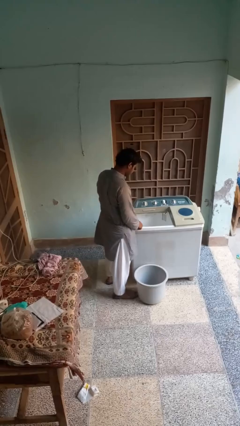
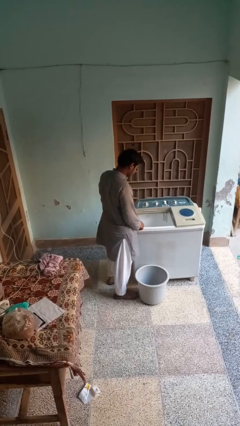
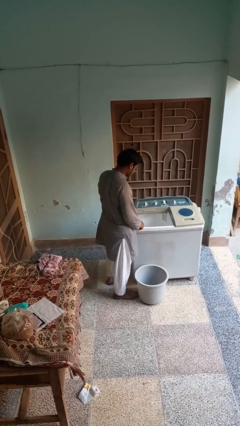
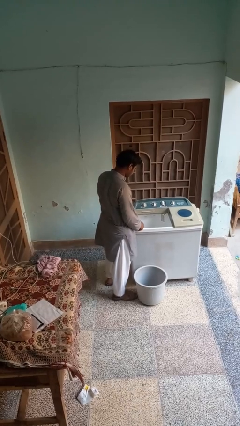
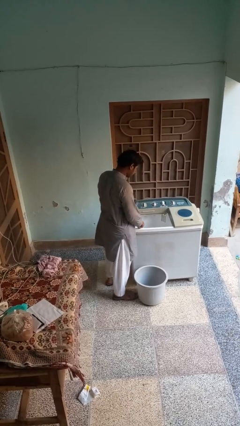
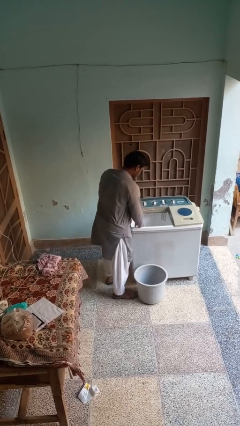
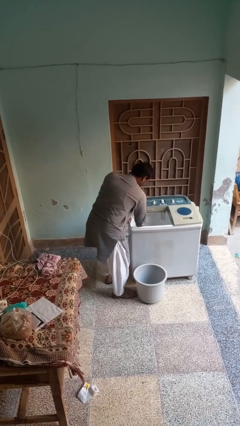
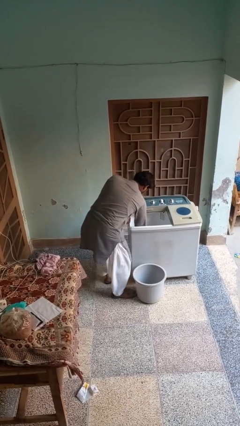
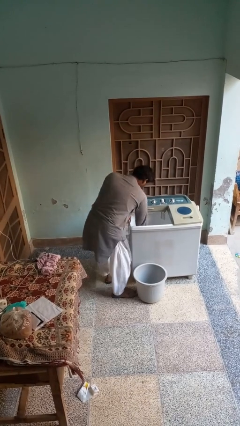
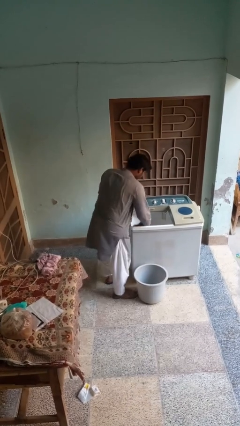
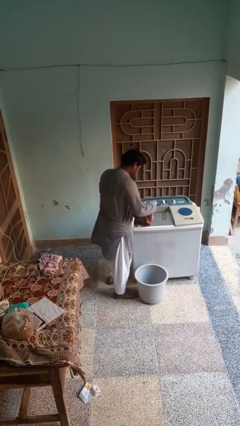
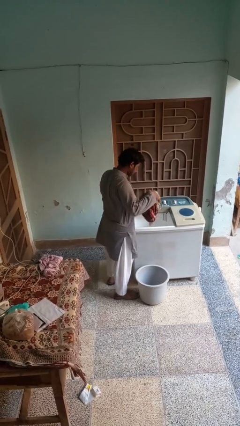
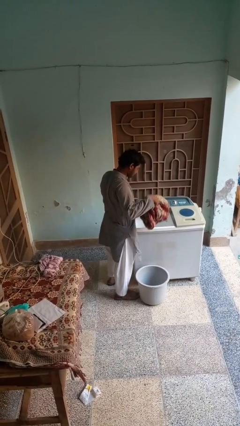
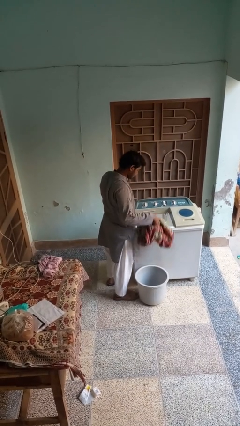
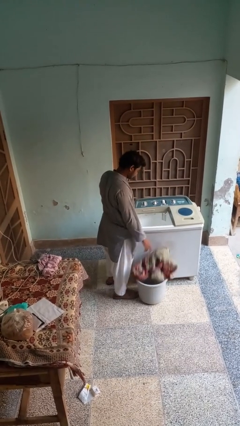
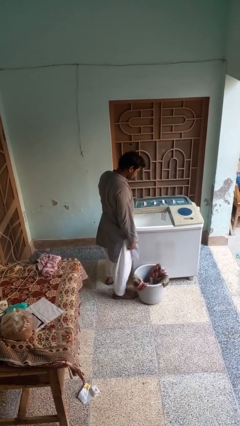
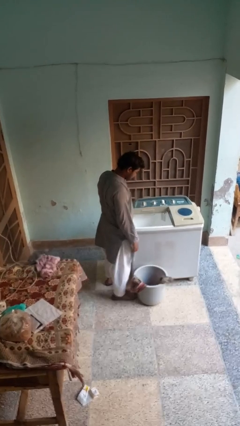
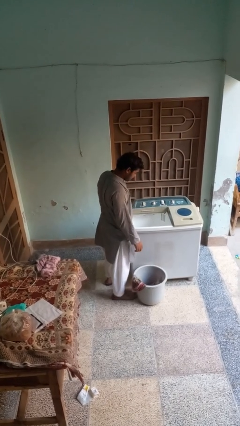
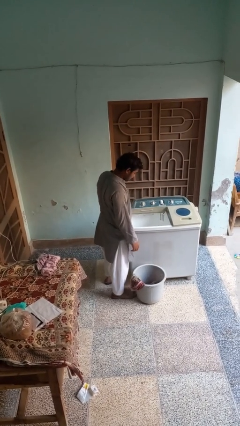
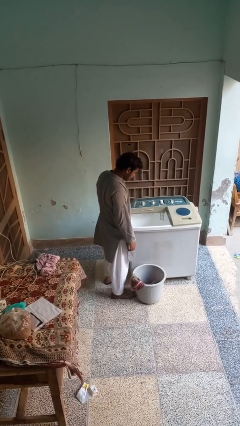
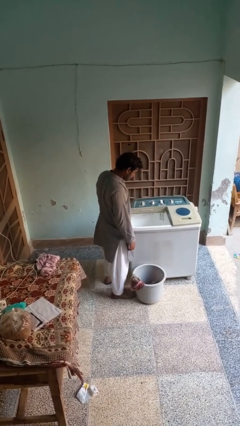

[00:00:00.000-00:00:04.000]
person unloads clotheswasher

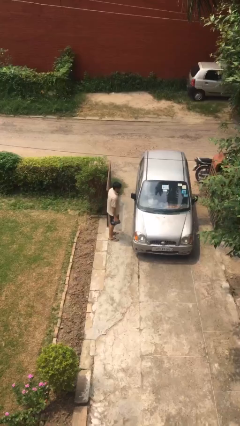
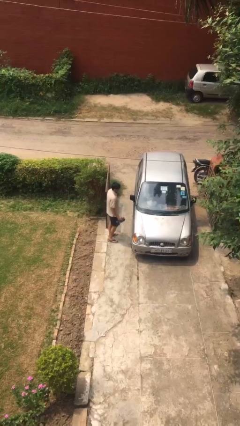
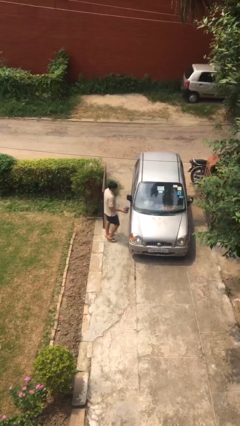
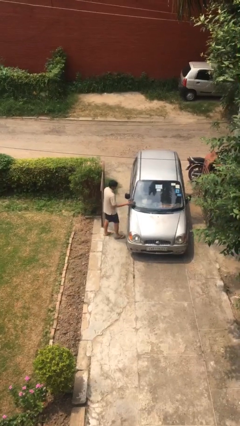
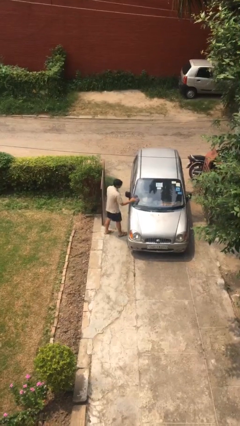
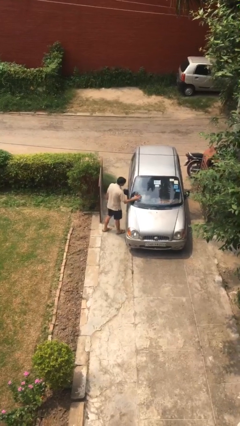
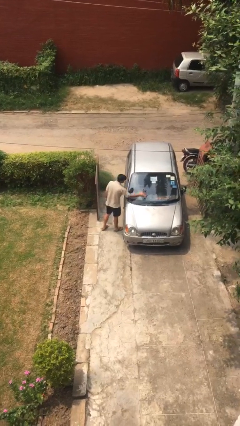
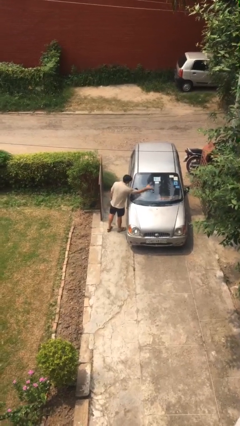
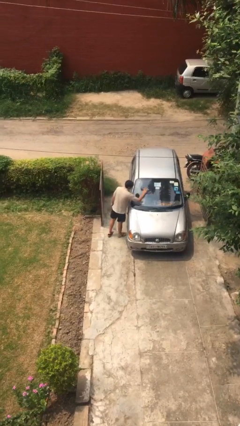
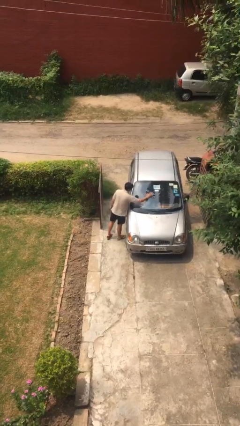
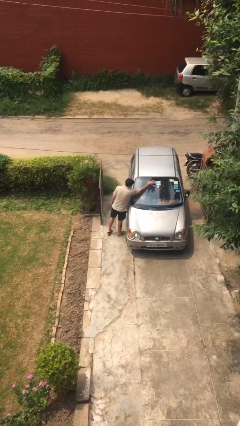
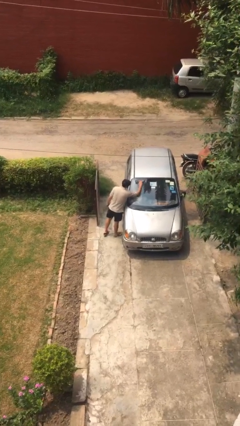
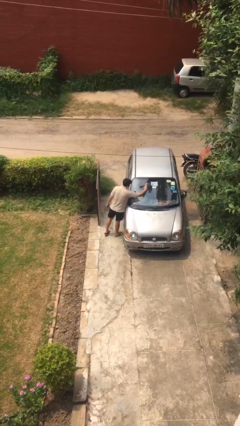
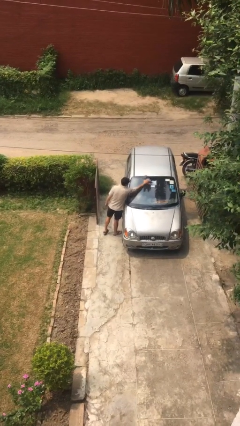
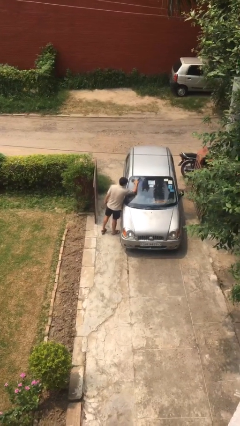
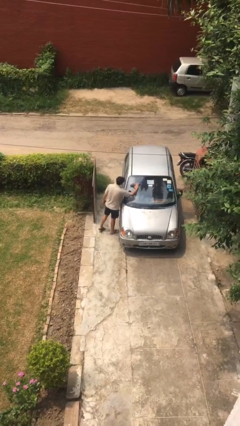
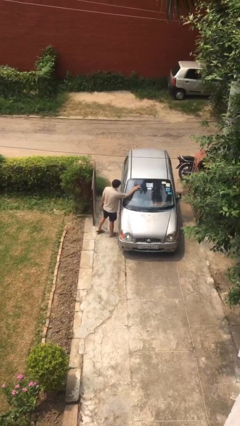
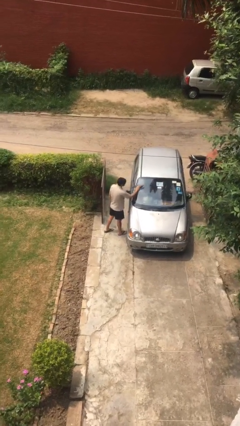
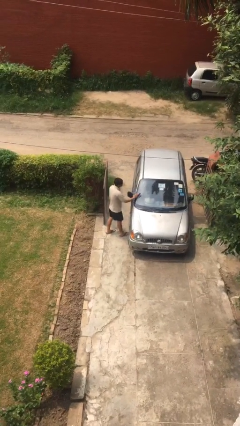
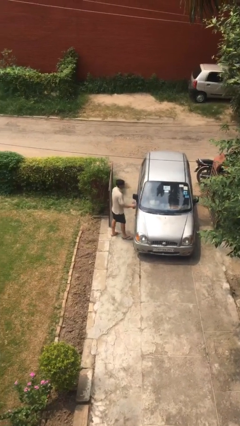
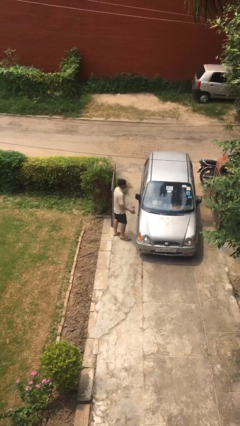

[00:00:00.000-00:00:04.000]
person polishes car with rag

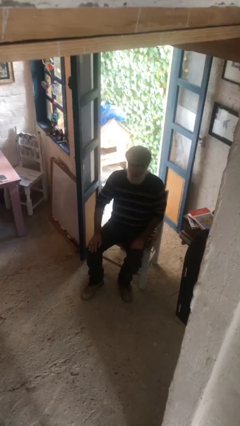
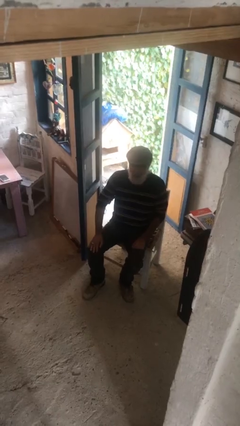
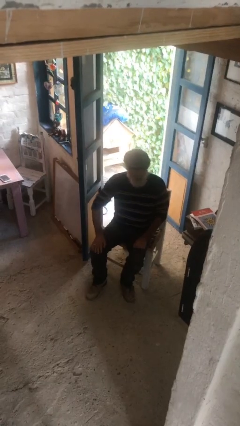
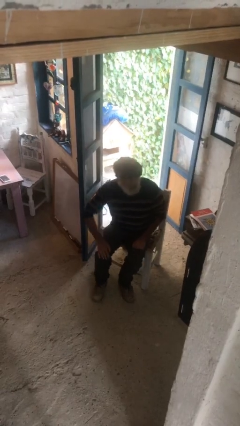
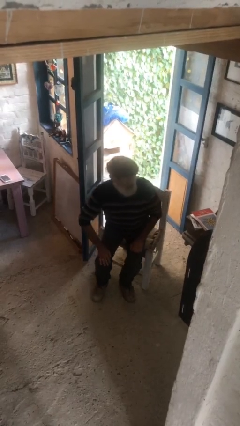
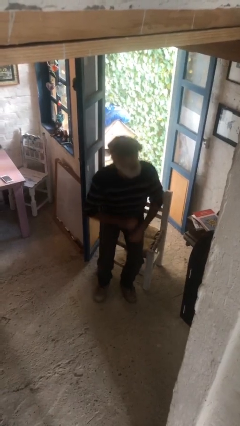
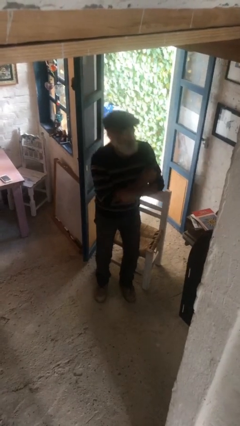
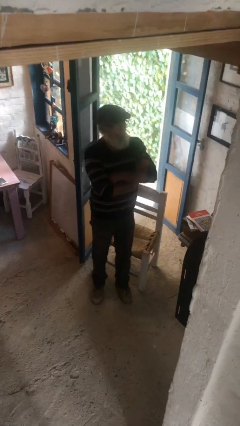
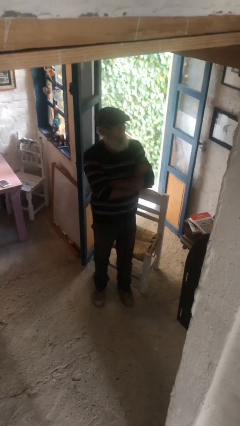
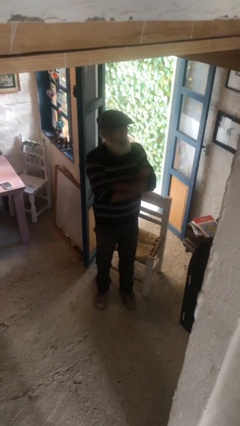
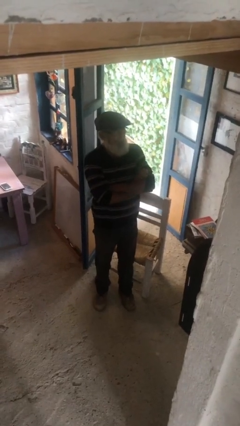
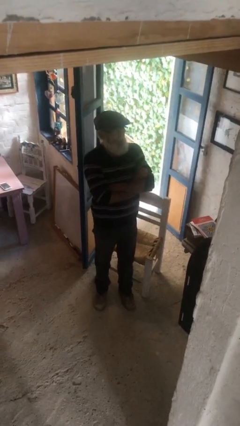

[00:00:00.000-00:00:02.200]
person stands up

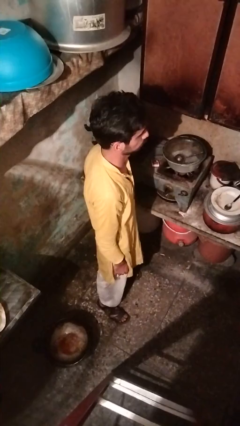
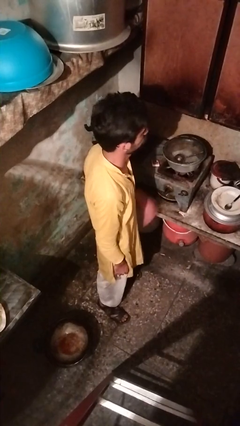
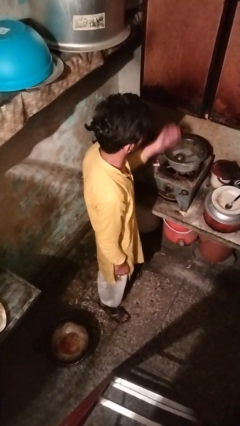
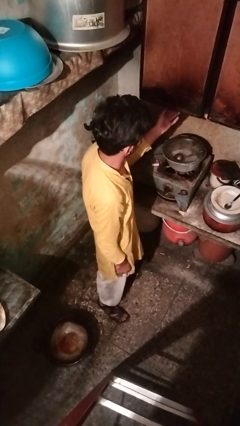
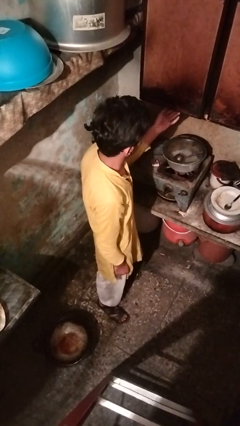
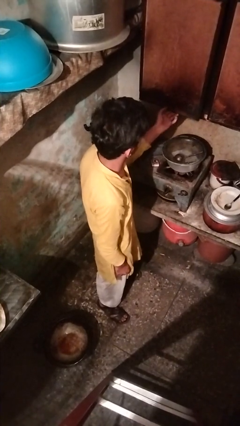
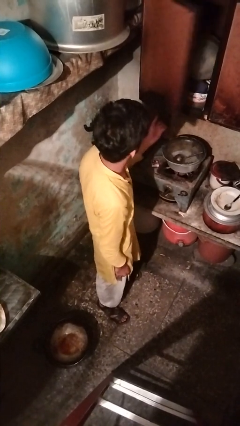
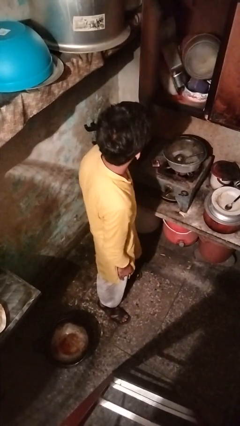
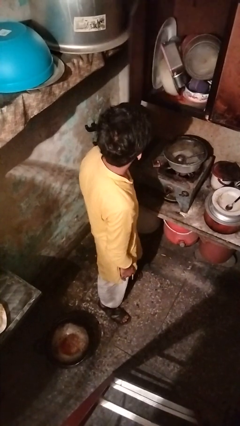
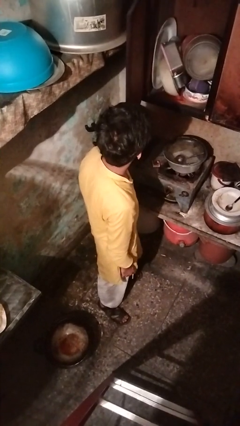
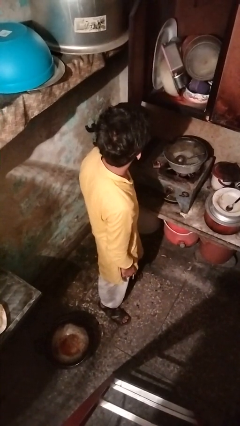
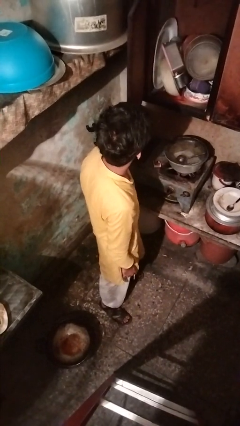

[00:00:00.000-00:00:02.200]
person opens cabinet

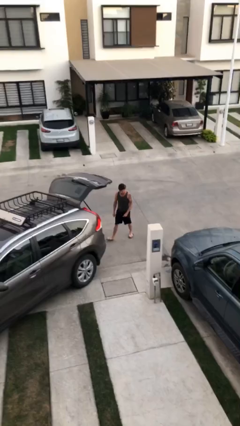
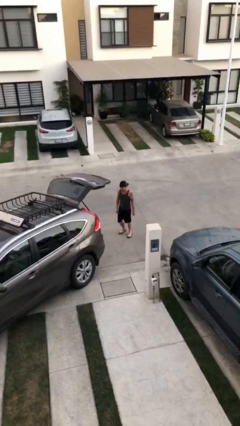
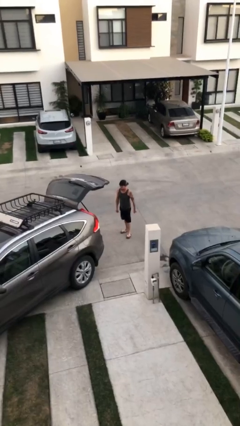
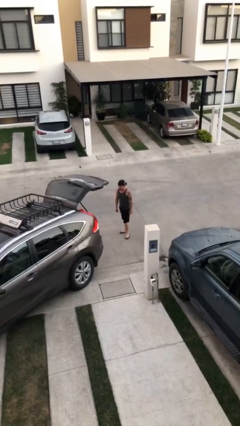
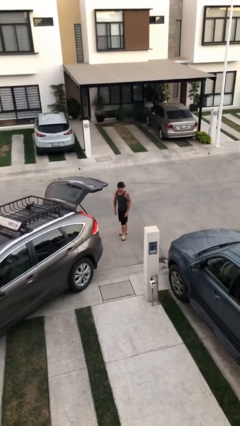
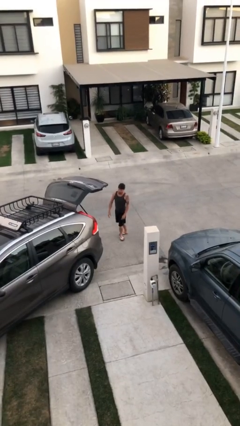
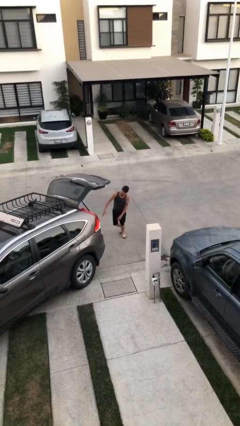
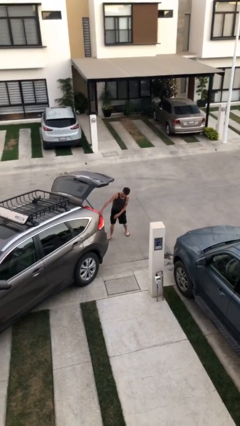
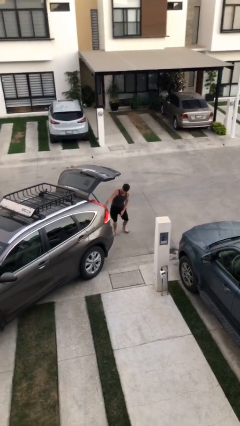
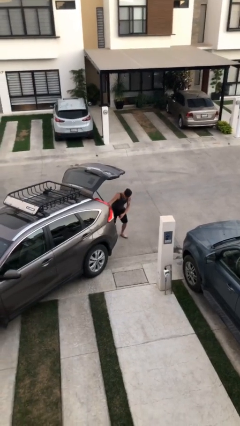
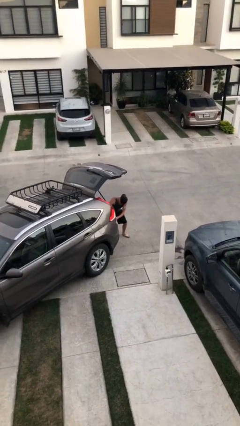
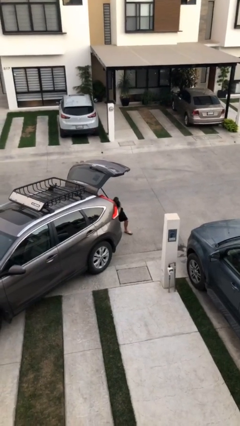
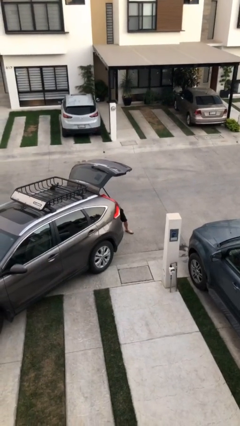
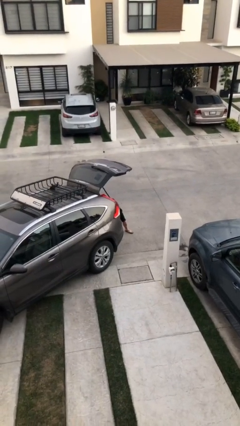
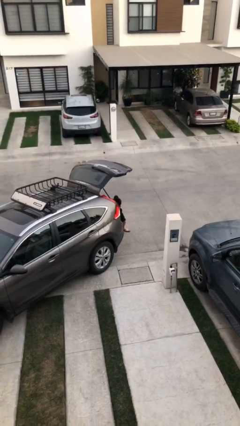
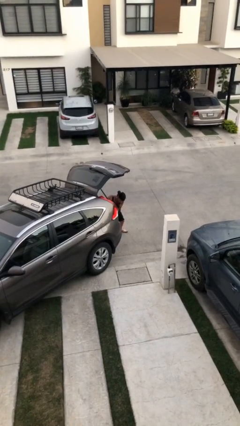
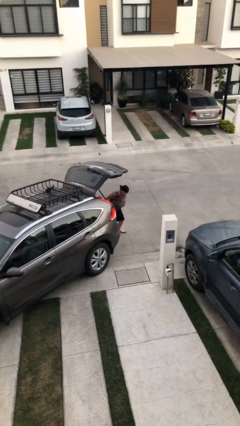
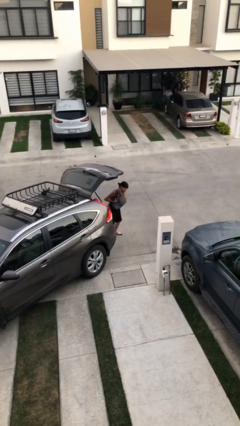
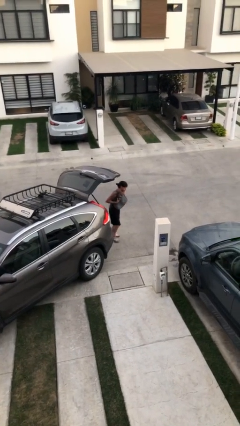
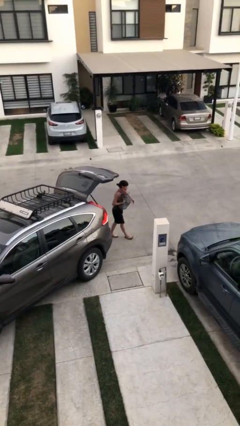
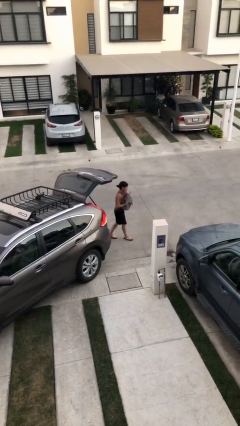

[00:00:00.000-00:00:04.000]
person unloads car

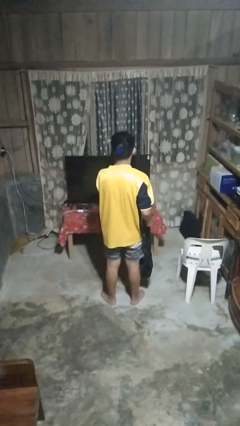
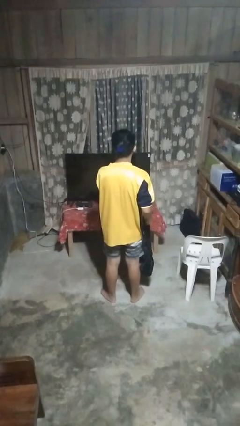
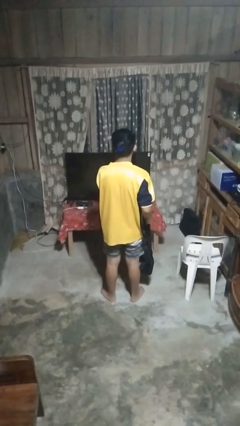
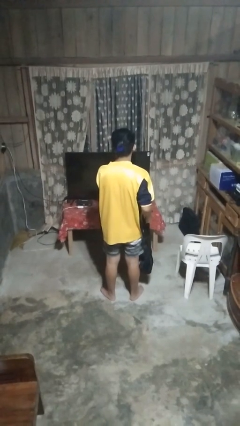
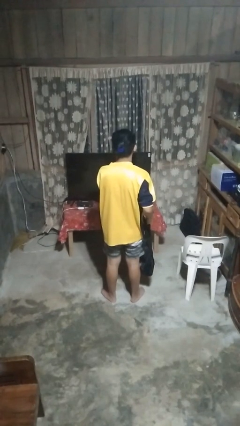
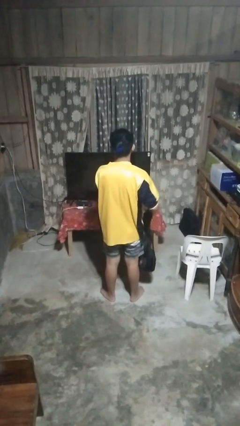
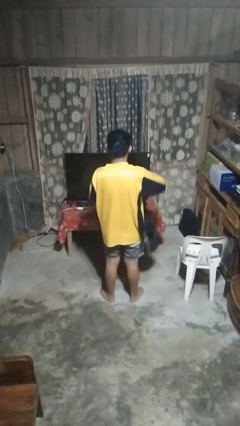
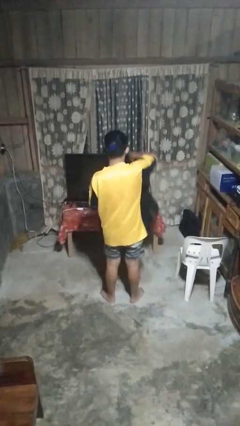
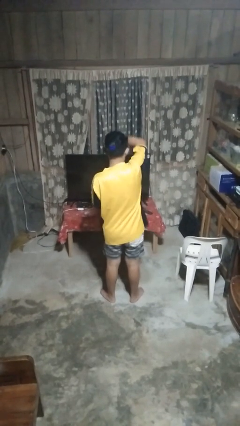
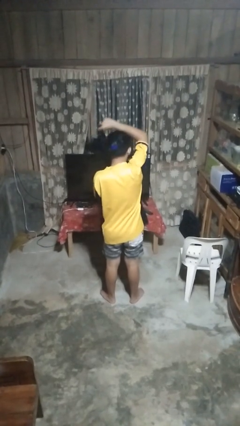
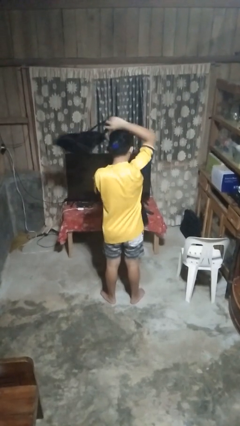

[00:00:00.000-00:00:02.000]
person puts on backpack
